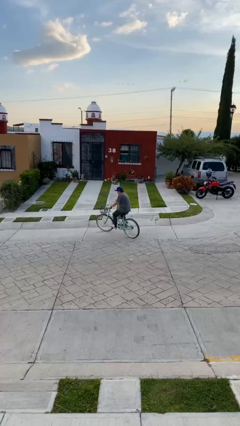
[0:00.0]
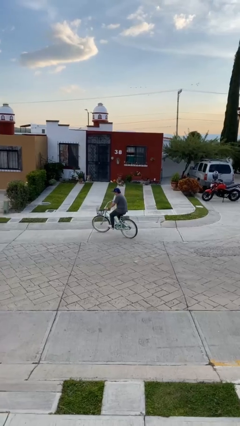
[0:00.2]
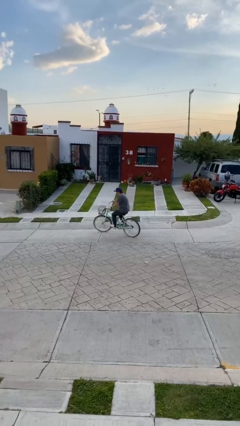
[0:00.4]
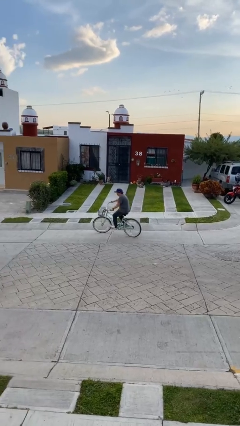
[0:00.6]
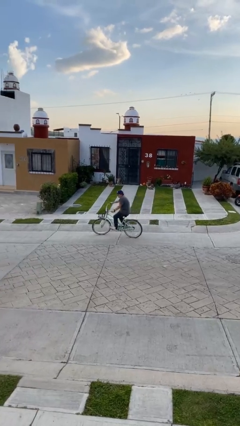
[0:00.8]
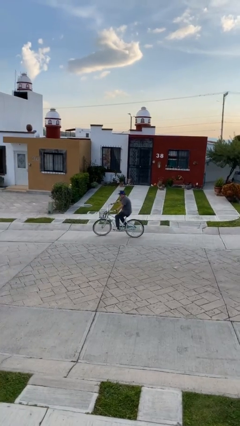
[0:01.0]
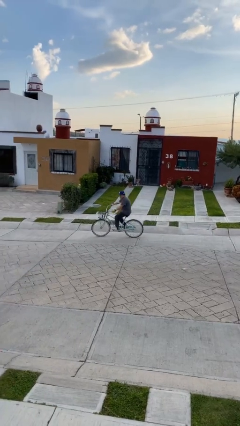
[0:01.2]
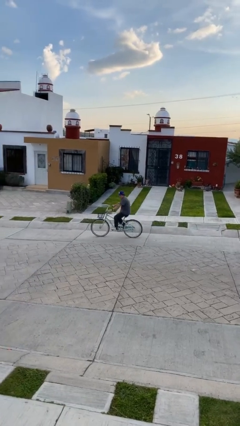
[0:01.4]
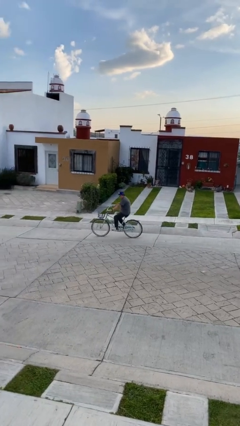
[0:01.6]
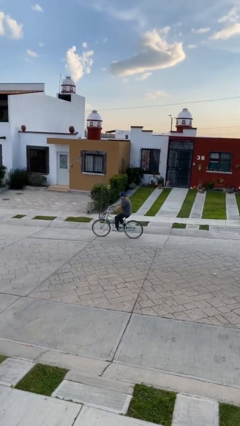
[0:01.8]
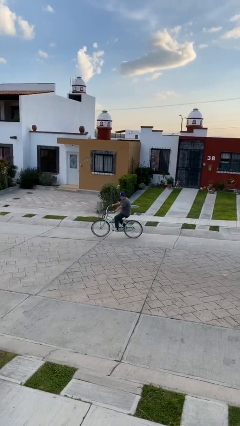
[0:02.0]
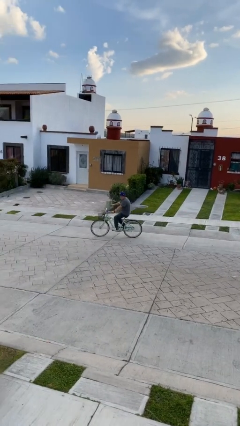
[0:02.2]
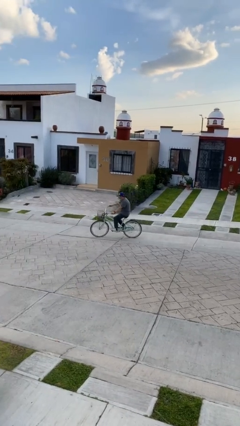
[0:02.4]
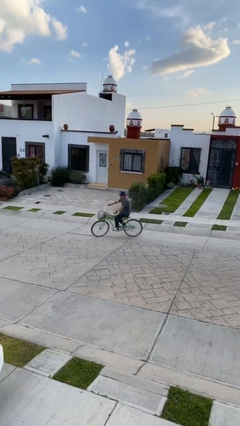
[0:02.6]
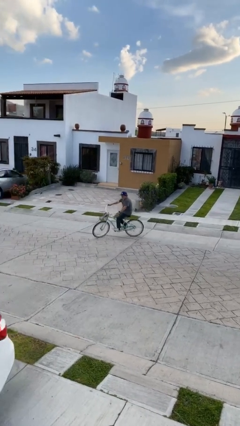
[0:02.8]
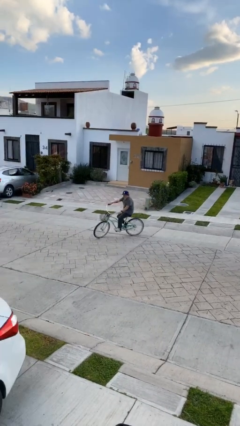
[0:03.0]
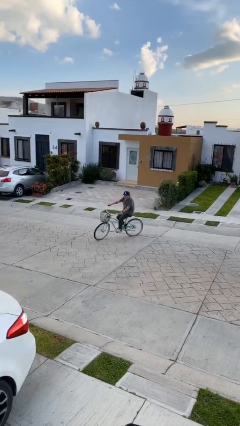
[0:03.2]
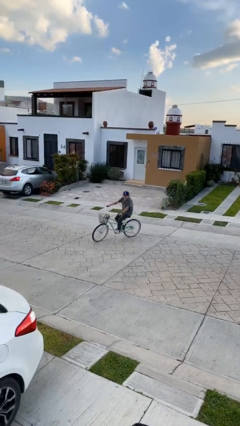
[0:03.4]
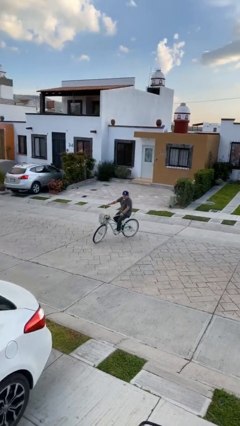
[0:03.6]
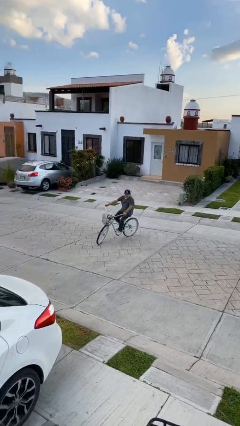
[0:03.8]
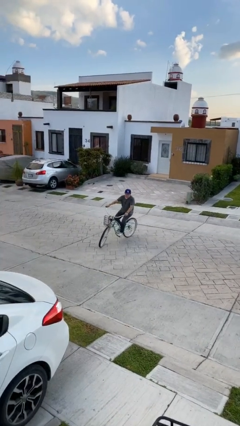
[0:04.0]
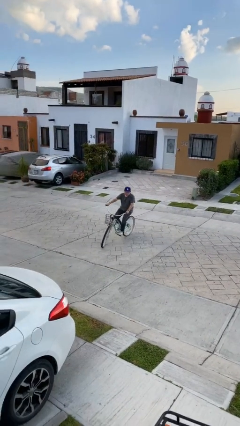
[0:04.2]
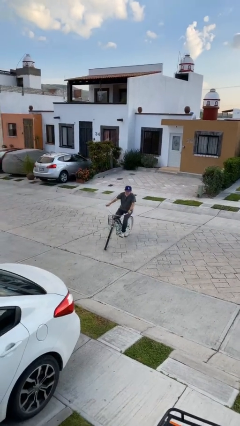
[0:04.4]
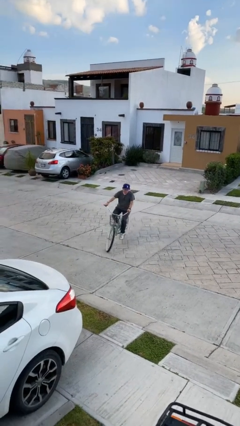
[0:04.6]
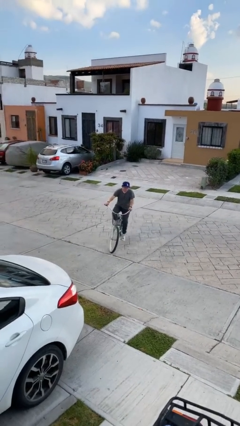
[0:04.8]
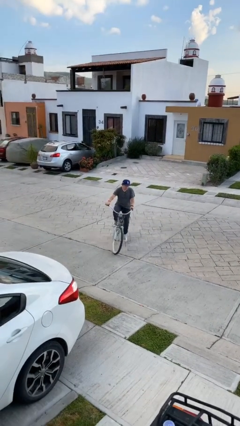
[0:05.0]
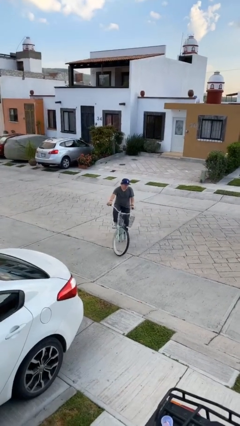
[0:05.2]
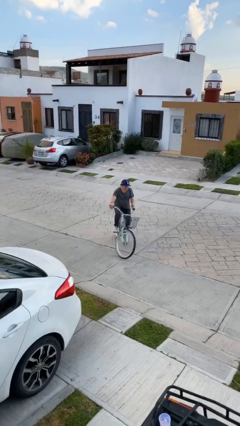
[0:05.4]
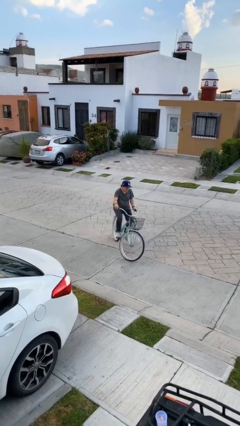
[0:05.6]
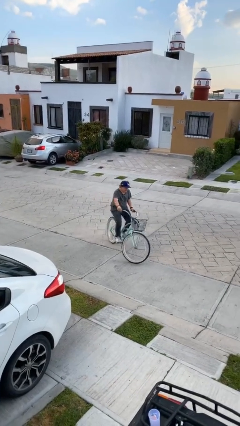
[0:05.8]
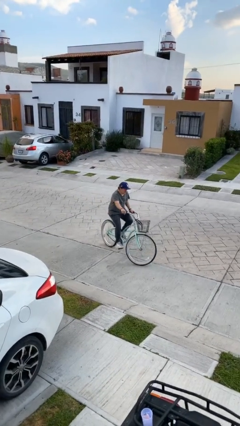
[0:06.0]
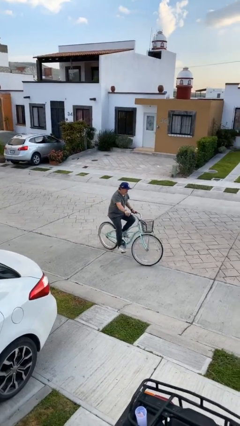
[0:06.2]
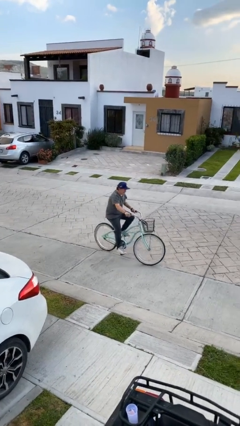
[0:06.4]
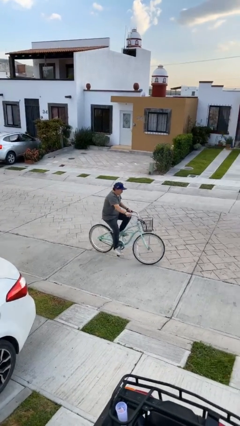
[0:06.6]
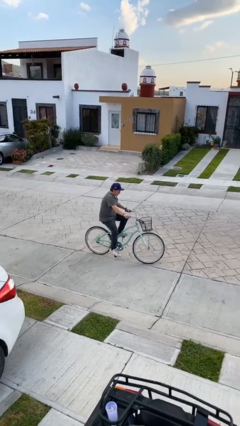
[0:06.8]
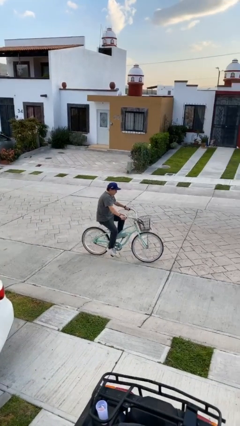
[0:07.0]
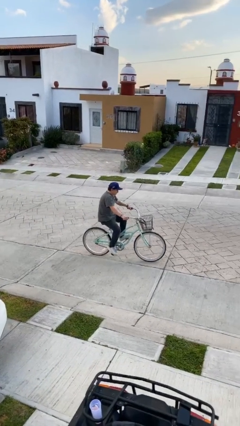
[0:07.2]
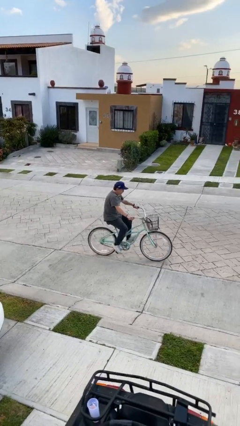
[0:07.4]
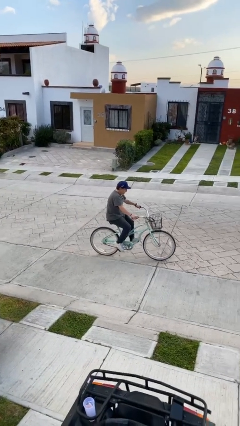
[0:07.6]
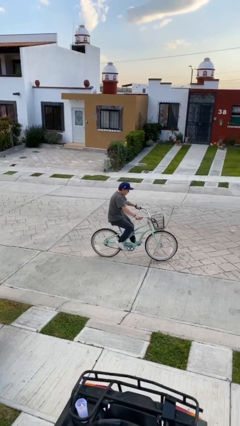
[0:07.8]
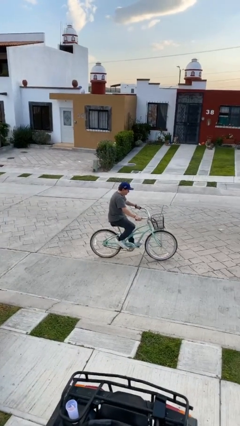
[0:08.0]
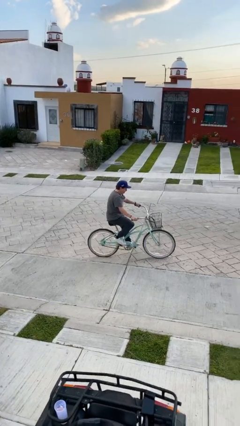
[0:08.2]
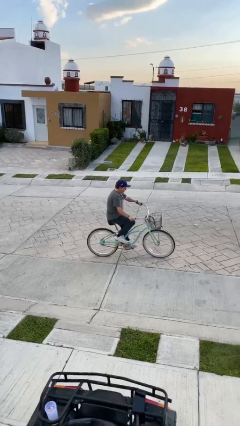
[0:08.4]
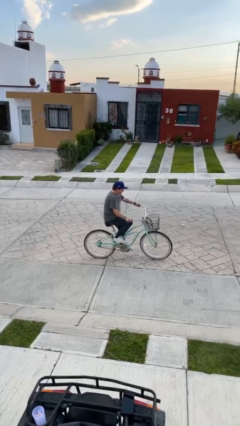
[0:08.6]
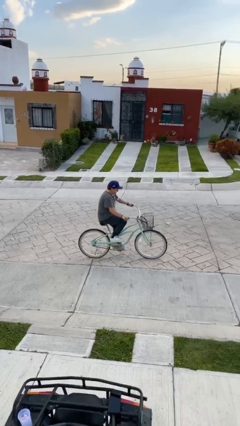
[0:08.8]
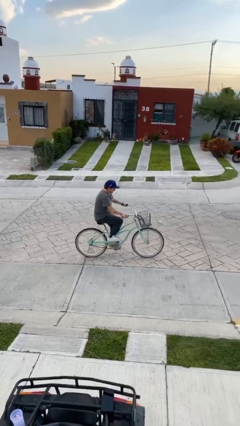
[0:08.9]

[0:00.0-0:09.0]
person rides bicycle

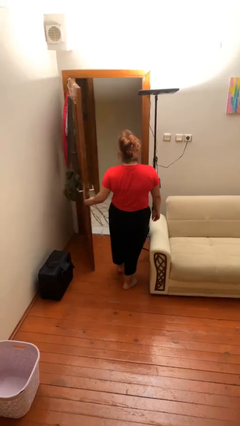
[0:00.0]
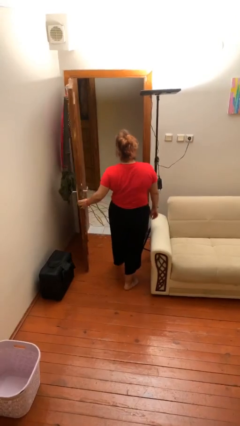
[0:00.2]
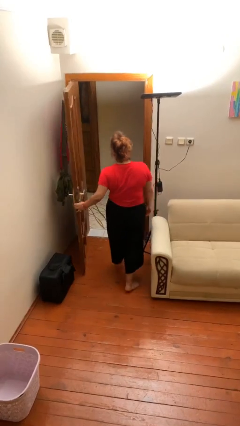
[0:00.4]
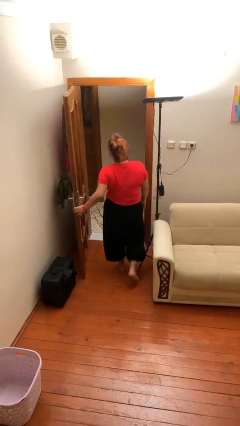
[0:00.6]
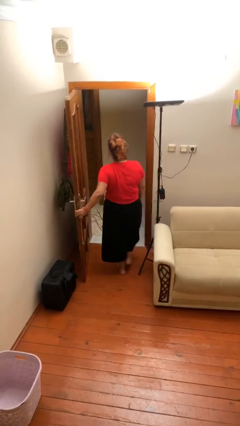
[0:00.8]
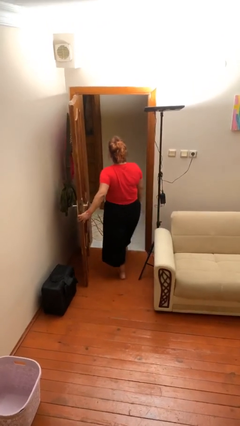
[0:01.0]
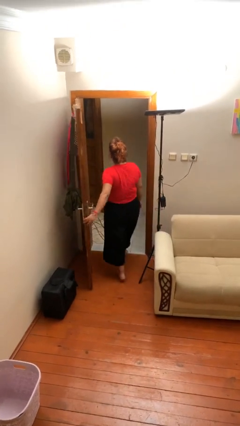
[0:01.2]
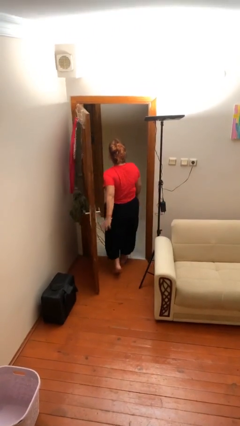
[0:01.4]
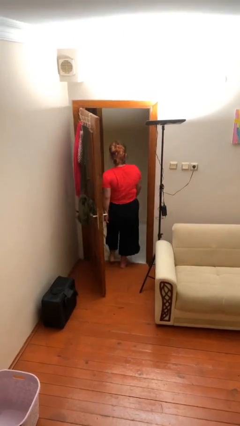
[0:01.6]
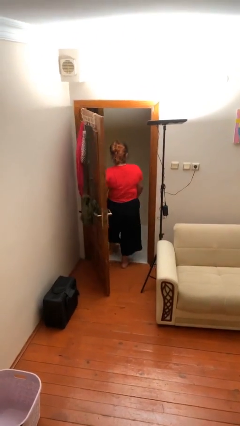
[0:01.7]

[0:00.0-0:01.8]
person exits scene through structure

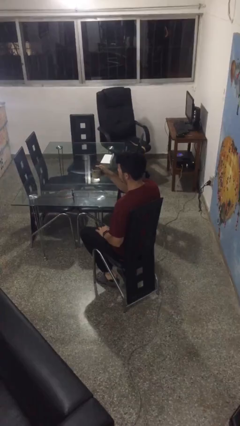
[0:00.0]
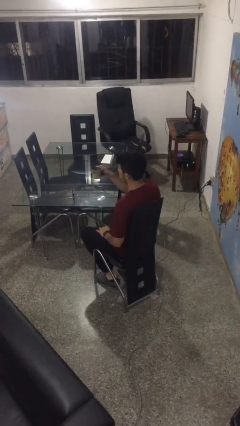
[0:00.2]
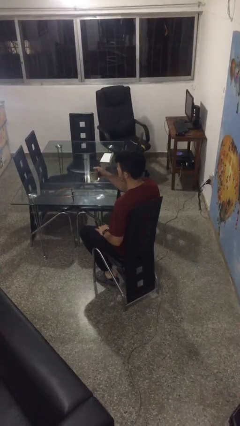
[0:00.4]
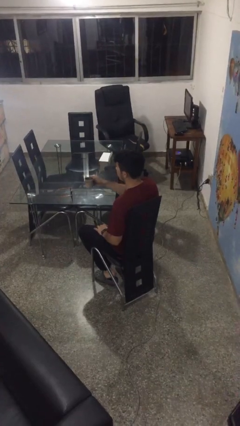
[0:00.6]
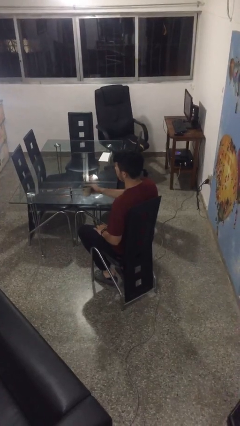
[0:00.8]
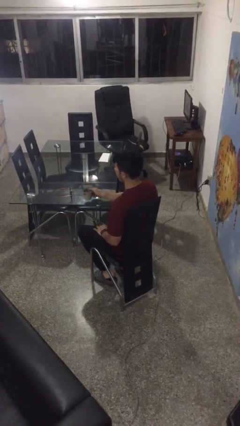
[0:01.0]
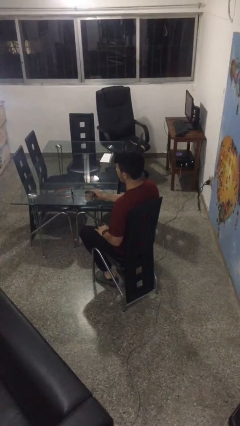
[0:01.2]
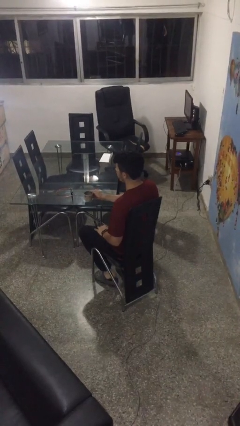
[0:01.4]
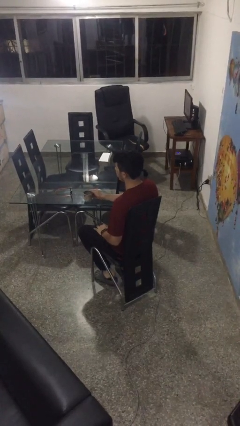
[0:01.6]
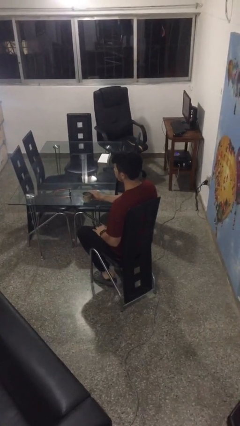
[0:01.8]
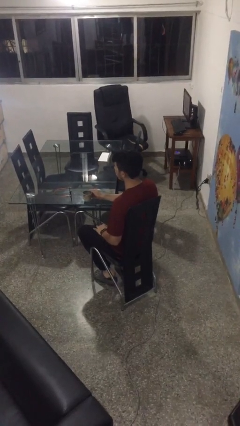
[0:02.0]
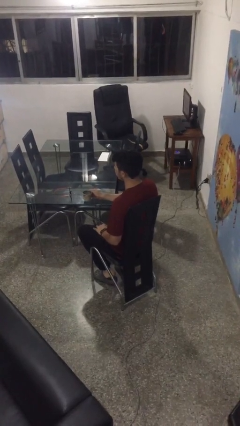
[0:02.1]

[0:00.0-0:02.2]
person puts down object on table

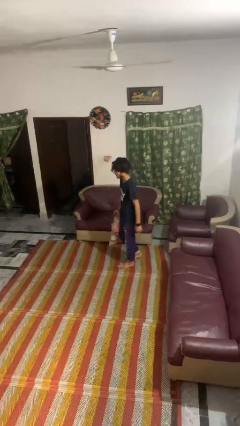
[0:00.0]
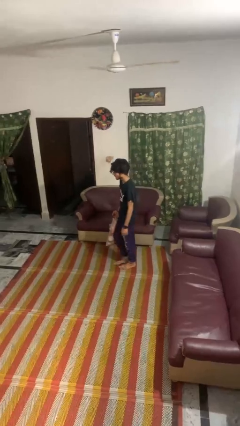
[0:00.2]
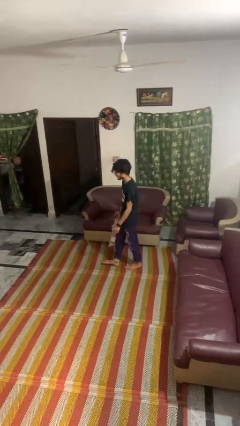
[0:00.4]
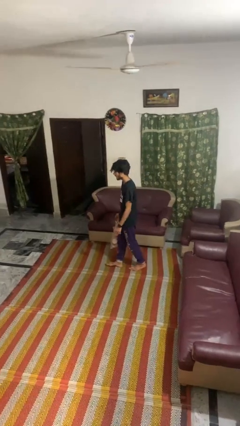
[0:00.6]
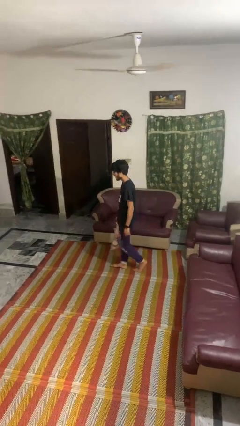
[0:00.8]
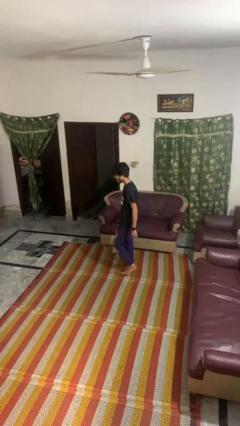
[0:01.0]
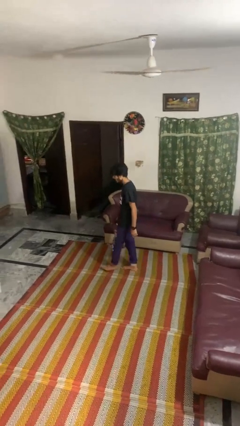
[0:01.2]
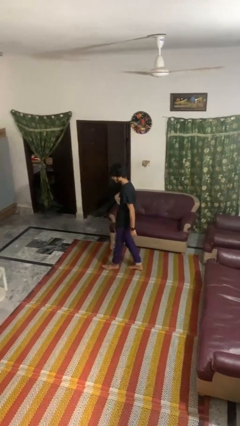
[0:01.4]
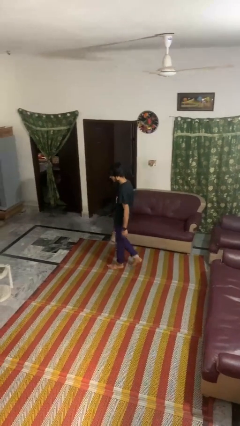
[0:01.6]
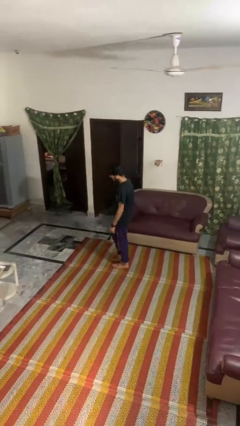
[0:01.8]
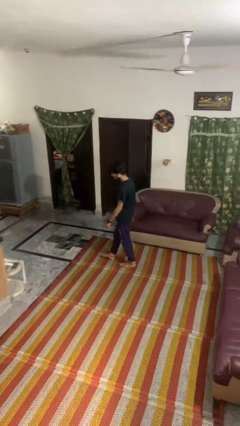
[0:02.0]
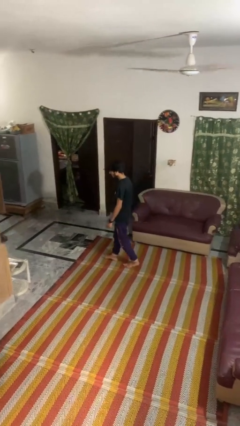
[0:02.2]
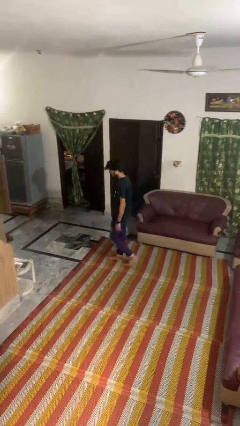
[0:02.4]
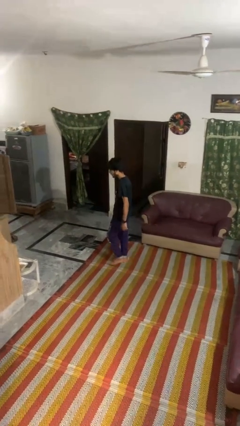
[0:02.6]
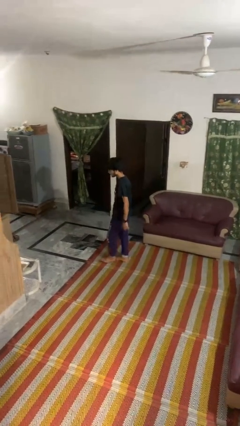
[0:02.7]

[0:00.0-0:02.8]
person carries groceries

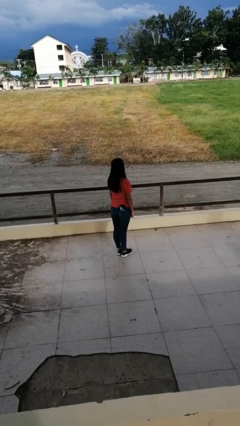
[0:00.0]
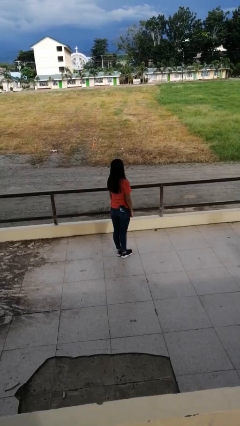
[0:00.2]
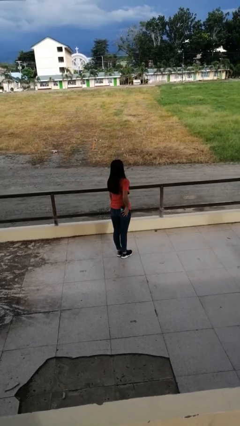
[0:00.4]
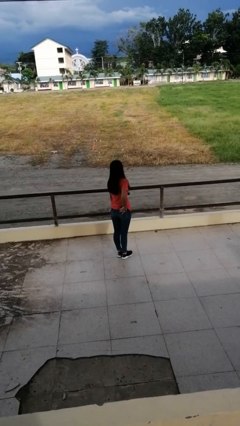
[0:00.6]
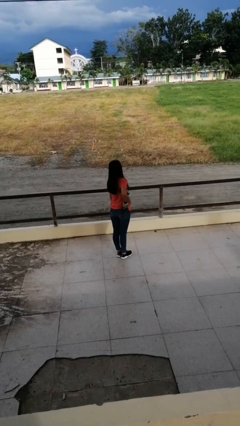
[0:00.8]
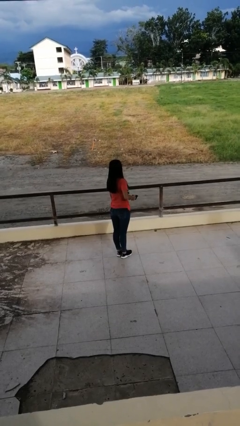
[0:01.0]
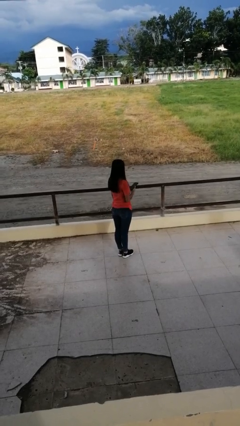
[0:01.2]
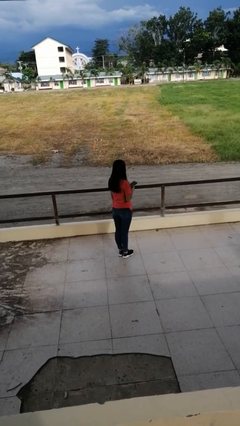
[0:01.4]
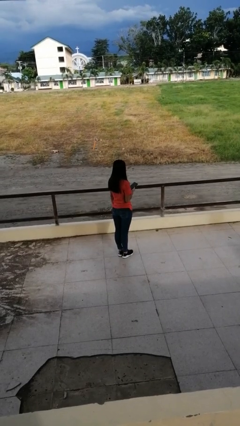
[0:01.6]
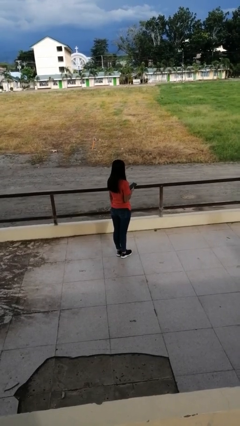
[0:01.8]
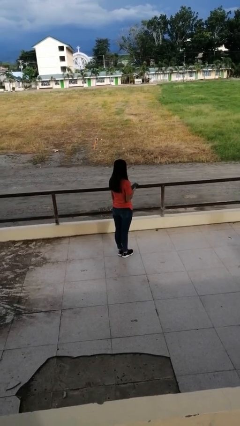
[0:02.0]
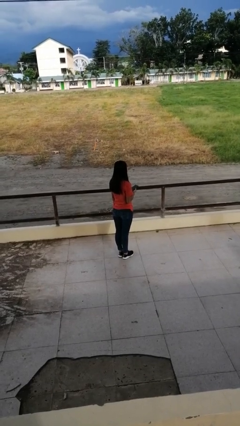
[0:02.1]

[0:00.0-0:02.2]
person takes phone from pocket
